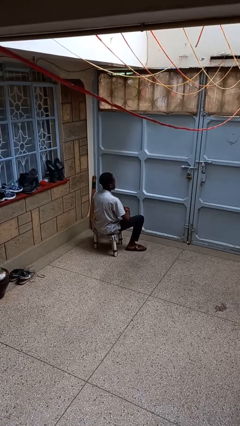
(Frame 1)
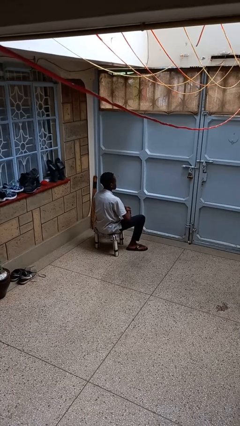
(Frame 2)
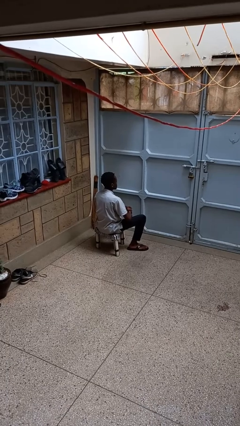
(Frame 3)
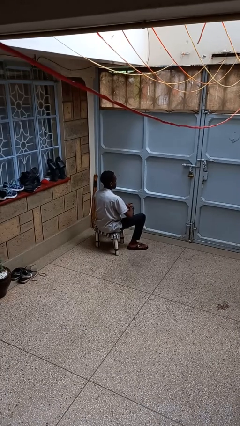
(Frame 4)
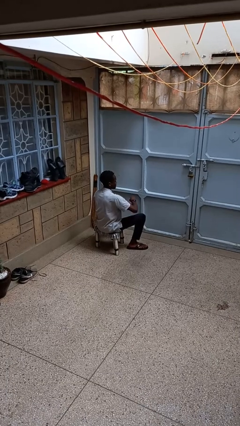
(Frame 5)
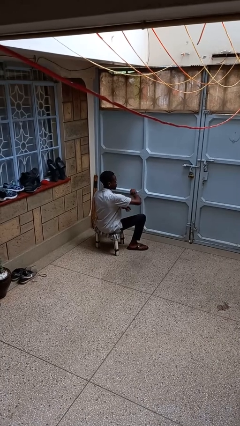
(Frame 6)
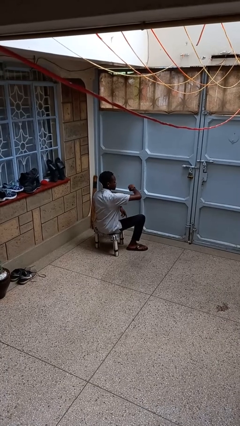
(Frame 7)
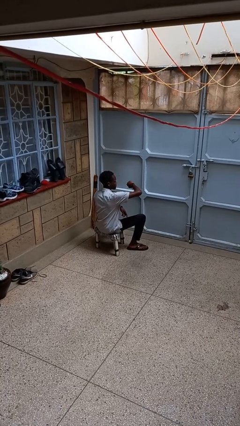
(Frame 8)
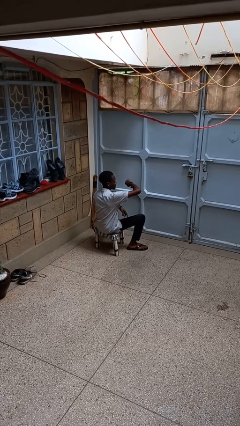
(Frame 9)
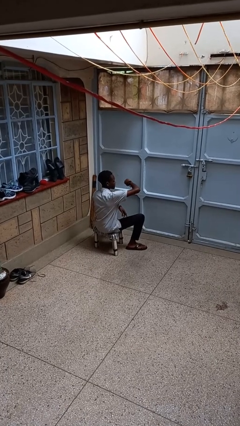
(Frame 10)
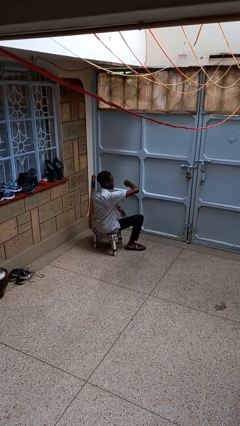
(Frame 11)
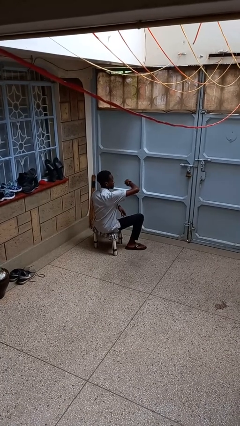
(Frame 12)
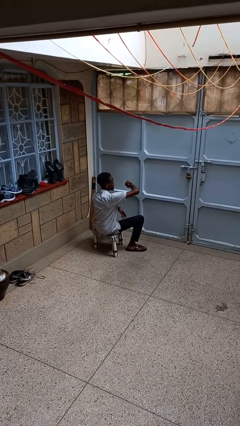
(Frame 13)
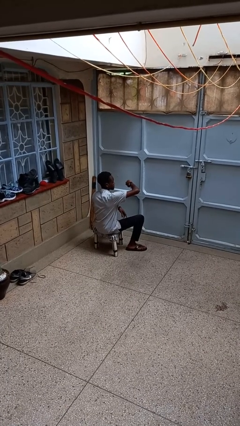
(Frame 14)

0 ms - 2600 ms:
person looks at wristwatch

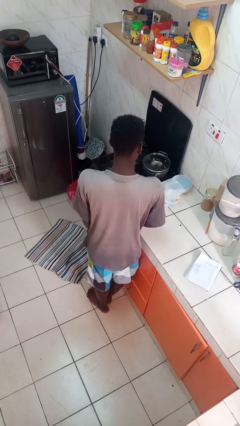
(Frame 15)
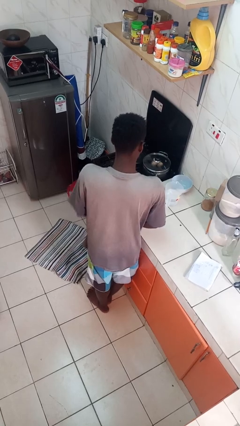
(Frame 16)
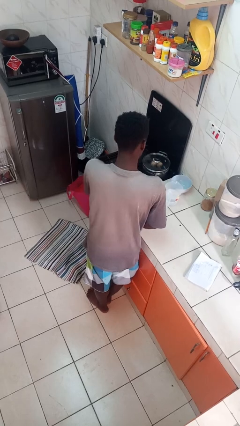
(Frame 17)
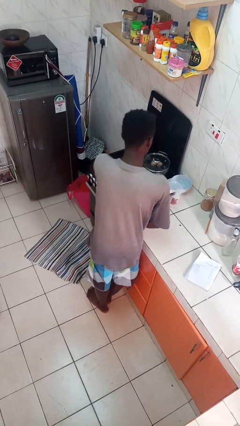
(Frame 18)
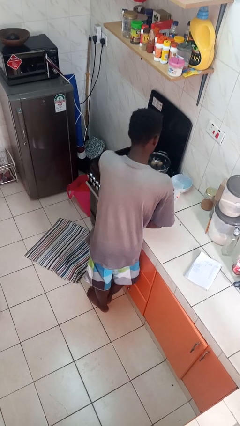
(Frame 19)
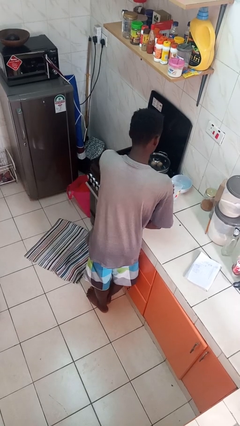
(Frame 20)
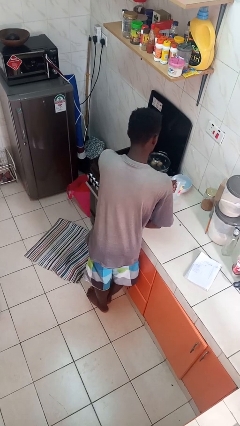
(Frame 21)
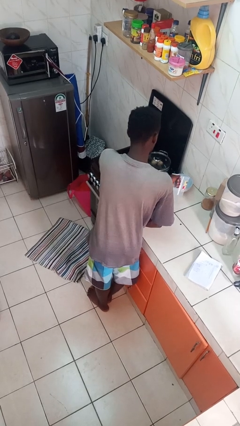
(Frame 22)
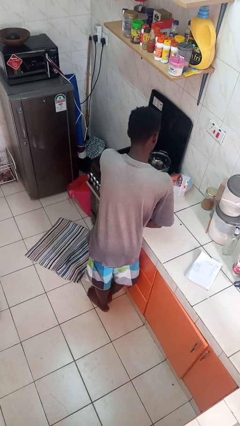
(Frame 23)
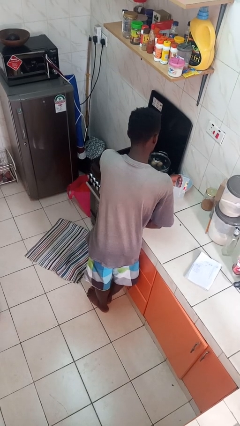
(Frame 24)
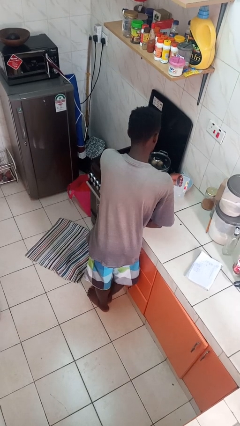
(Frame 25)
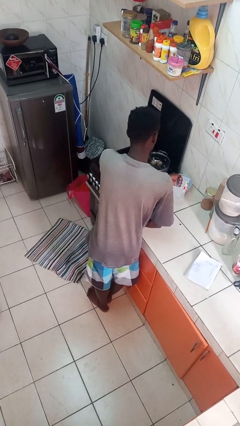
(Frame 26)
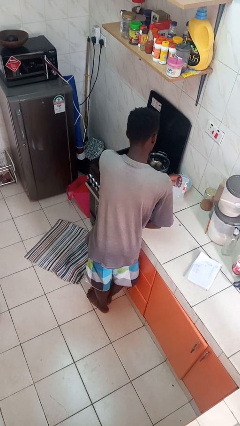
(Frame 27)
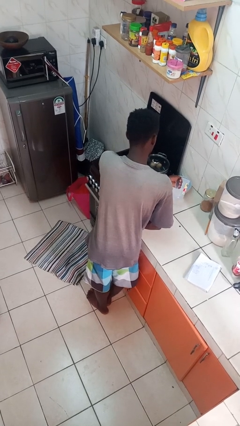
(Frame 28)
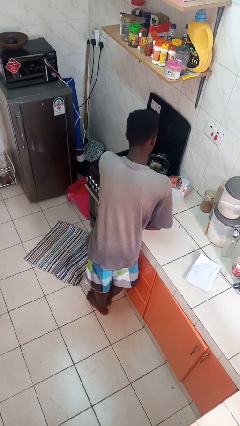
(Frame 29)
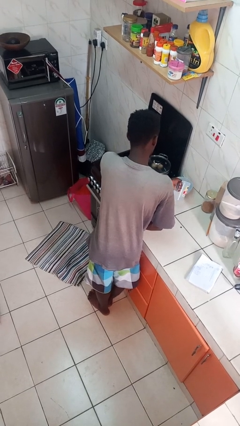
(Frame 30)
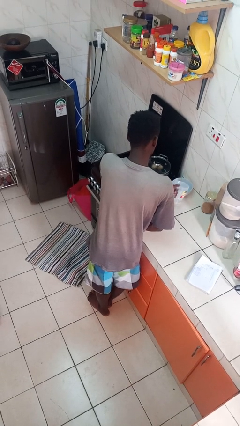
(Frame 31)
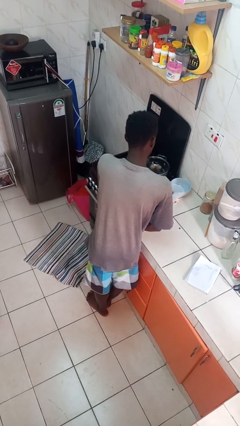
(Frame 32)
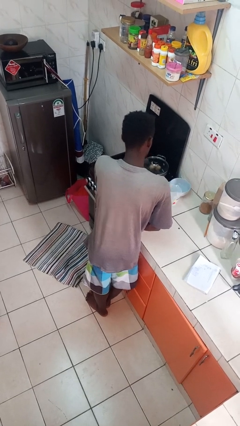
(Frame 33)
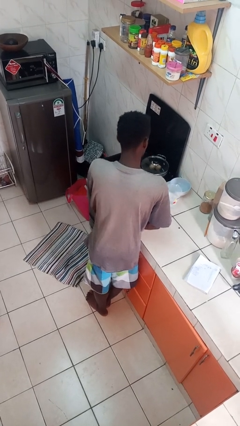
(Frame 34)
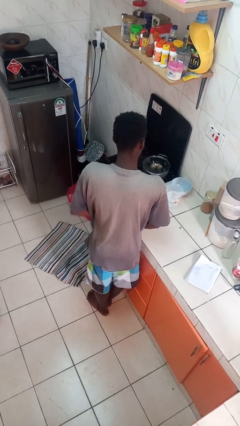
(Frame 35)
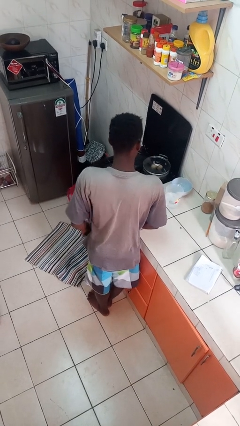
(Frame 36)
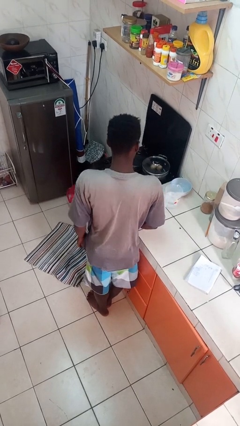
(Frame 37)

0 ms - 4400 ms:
person pours into bowl

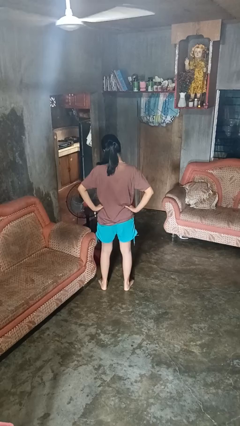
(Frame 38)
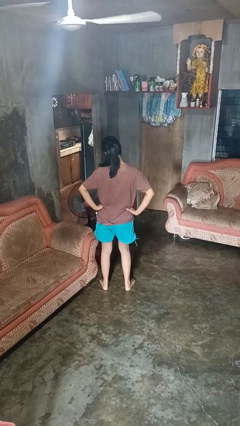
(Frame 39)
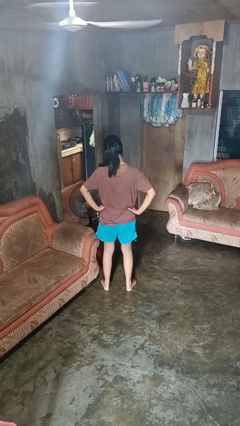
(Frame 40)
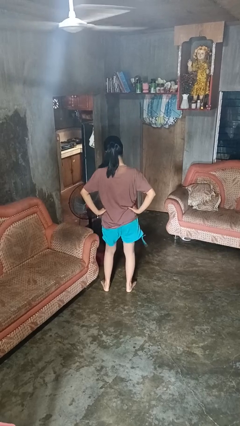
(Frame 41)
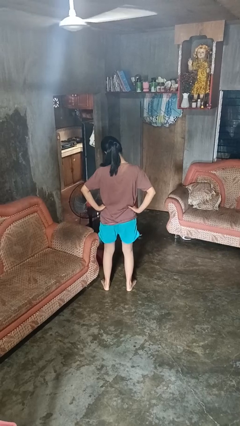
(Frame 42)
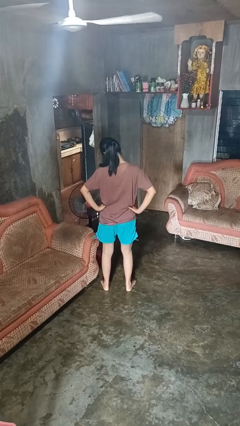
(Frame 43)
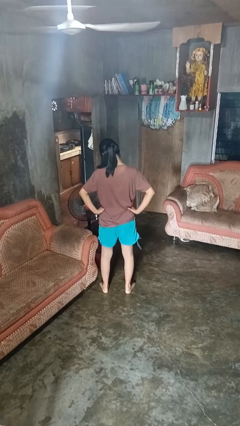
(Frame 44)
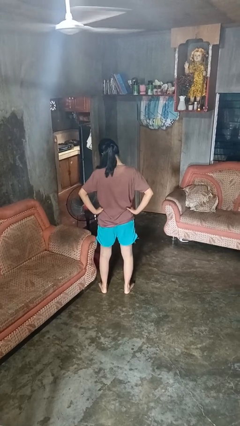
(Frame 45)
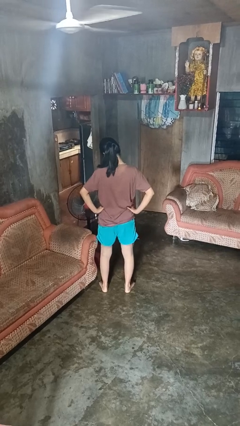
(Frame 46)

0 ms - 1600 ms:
person wiggles hips

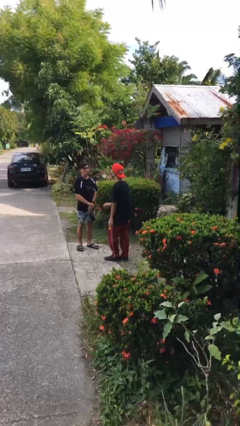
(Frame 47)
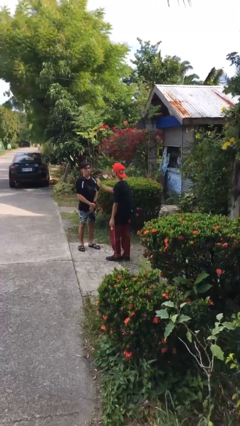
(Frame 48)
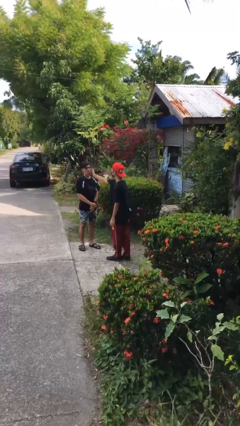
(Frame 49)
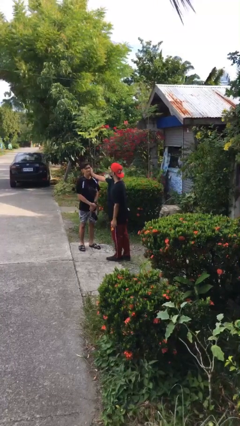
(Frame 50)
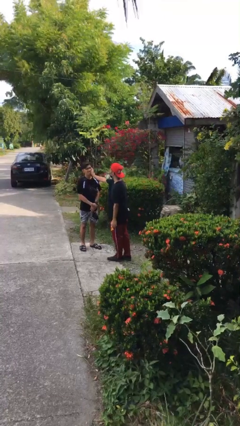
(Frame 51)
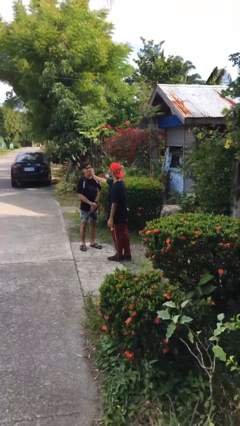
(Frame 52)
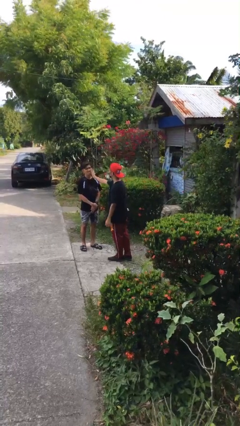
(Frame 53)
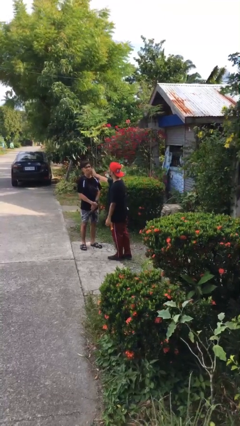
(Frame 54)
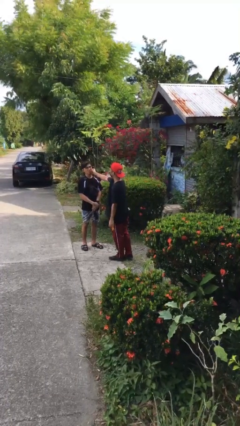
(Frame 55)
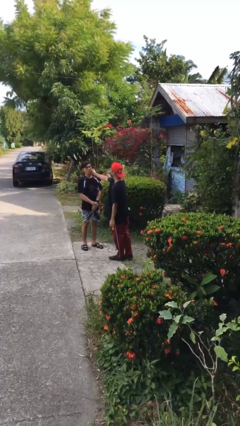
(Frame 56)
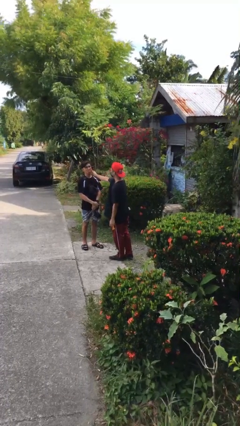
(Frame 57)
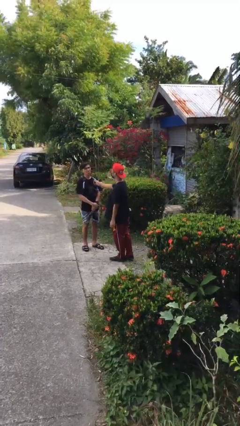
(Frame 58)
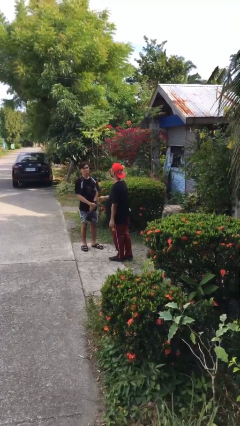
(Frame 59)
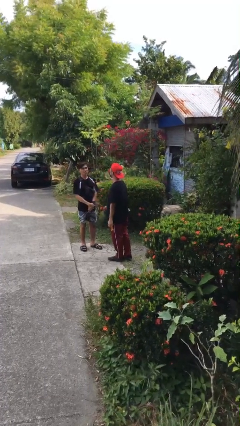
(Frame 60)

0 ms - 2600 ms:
person touches face of person

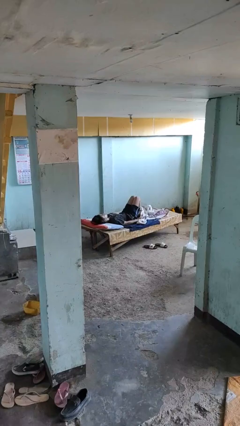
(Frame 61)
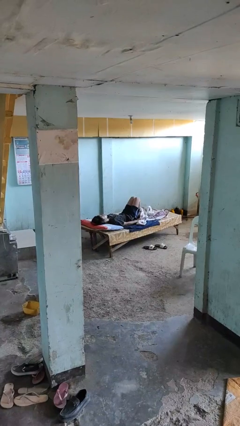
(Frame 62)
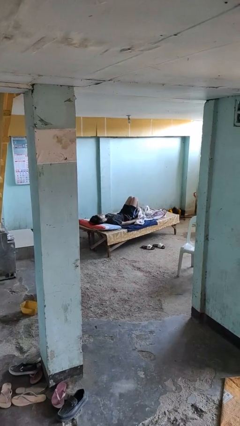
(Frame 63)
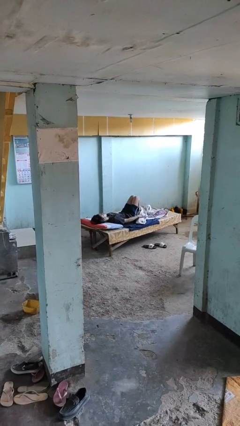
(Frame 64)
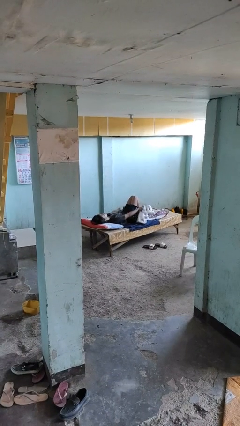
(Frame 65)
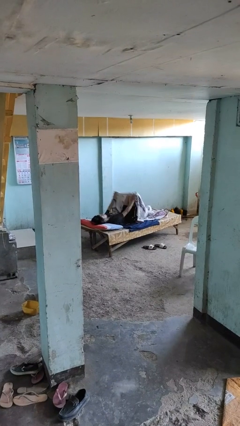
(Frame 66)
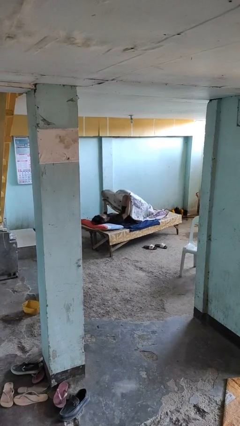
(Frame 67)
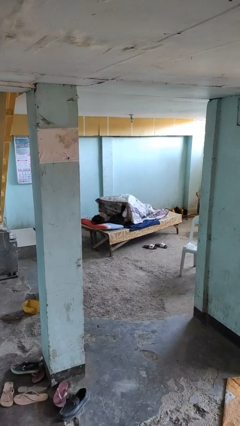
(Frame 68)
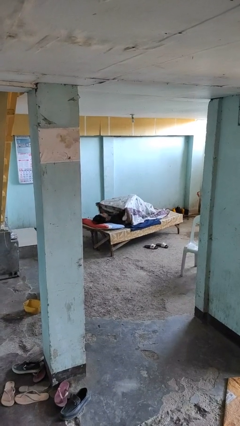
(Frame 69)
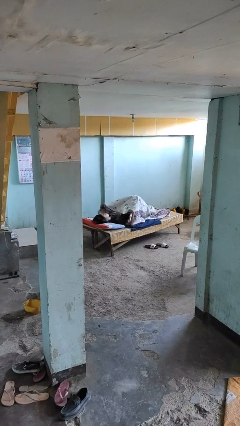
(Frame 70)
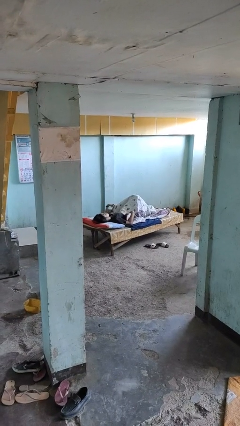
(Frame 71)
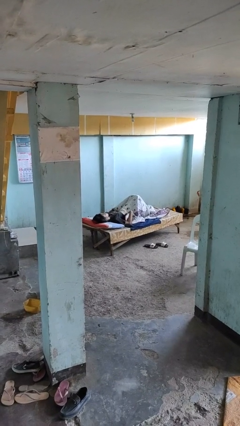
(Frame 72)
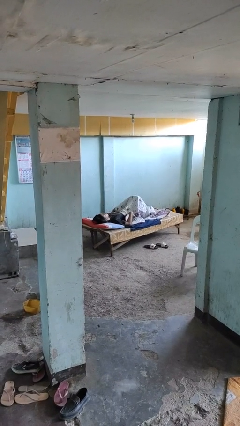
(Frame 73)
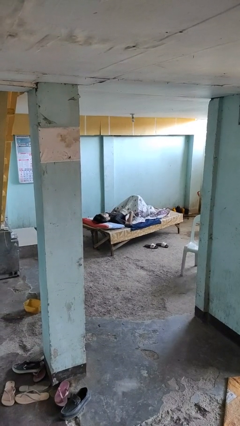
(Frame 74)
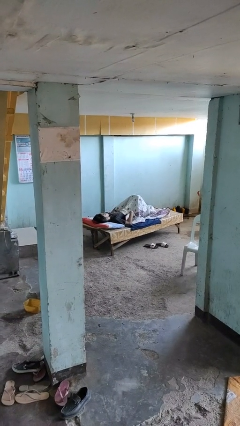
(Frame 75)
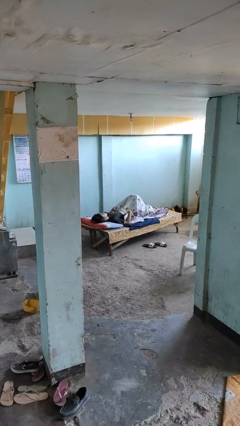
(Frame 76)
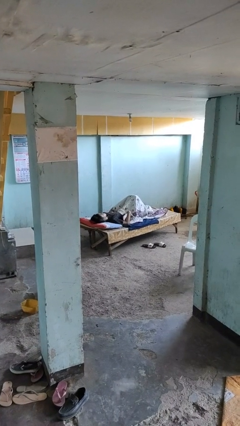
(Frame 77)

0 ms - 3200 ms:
person covers with bedsheets

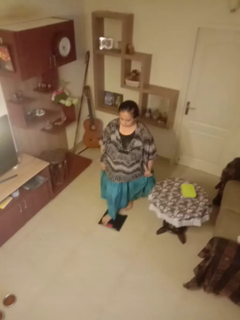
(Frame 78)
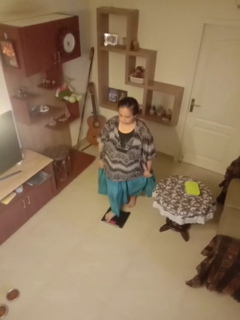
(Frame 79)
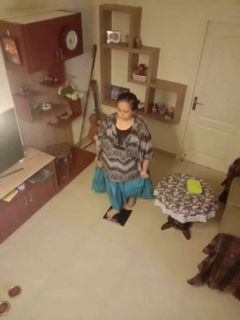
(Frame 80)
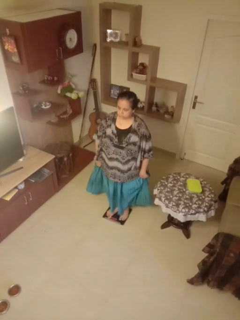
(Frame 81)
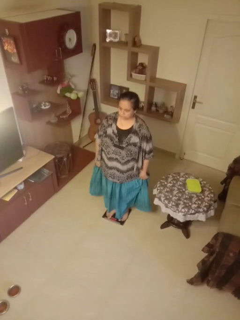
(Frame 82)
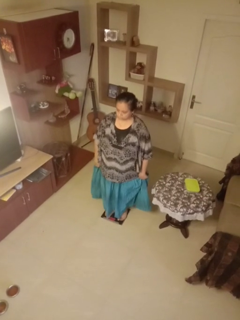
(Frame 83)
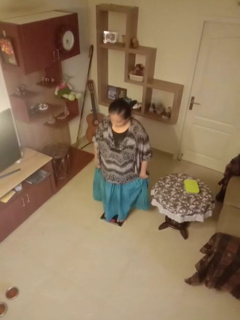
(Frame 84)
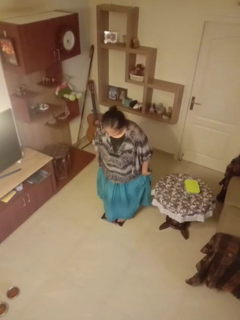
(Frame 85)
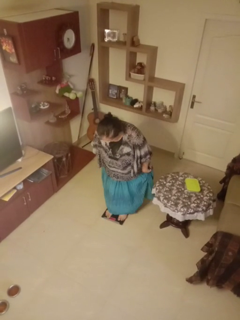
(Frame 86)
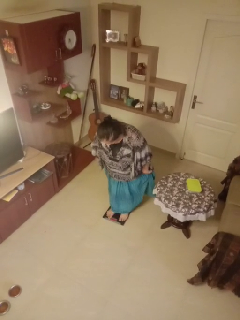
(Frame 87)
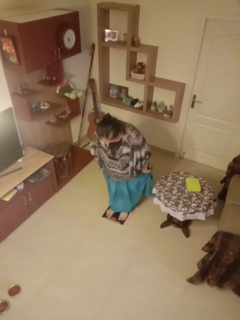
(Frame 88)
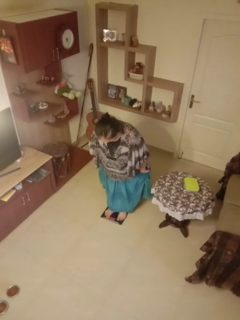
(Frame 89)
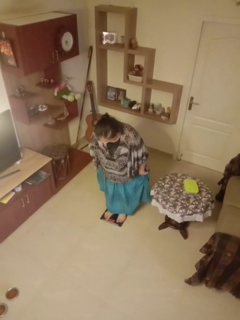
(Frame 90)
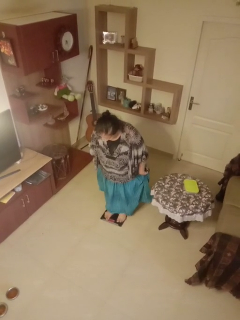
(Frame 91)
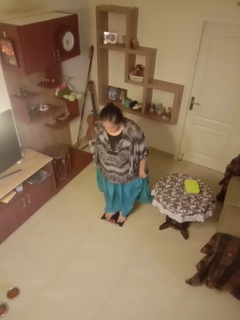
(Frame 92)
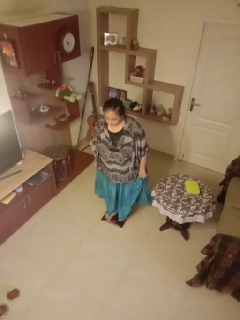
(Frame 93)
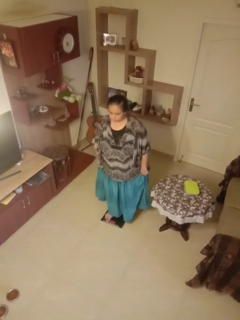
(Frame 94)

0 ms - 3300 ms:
person uses bodyweight scale

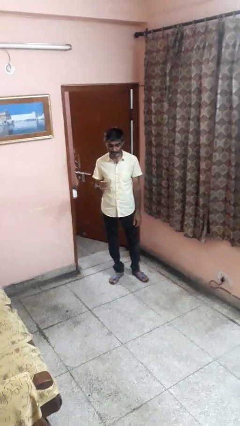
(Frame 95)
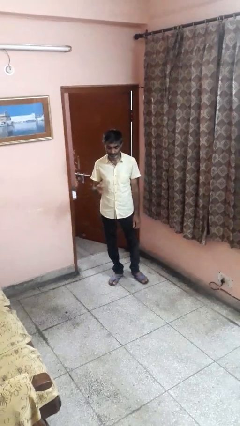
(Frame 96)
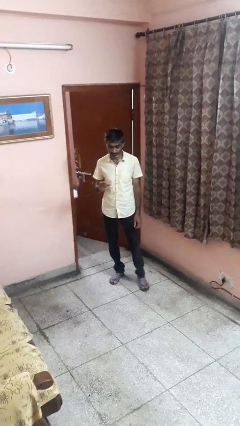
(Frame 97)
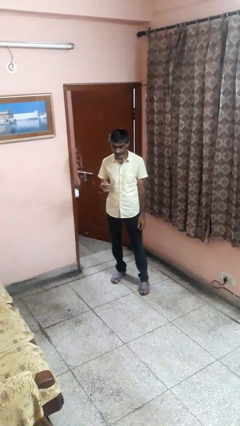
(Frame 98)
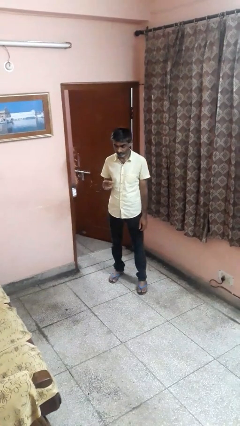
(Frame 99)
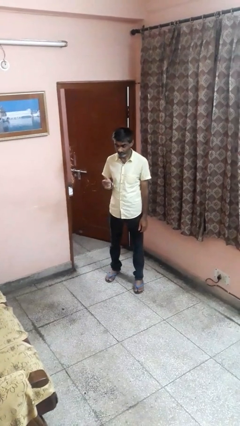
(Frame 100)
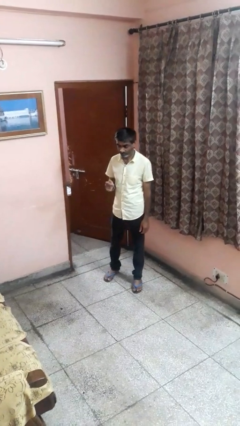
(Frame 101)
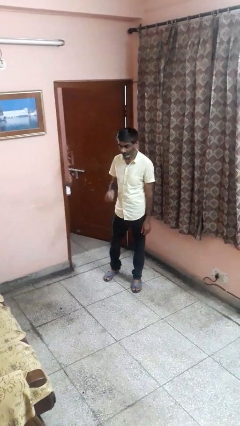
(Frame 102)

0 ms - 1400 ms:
person snaps fingers
